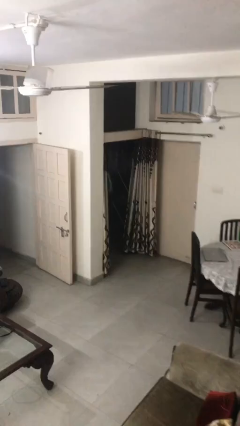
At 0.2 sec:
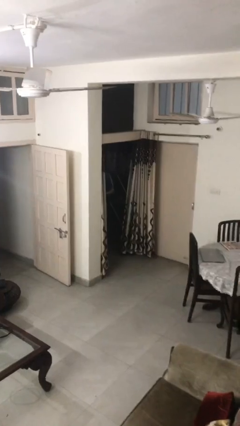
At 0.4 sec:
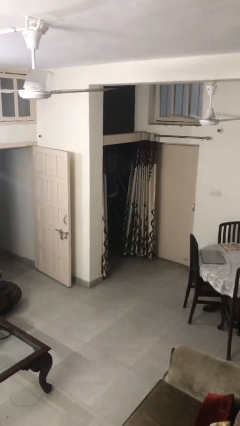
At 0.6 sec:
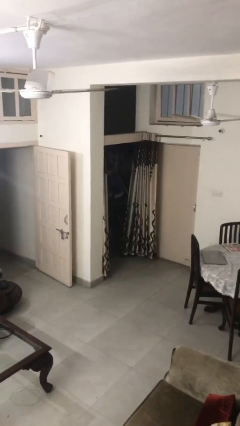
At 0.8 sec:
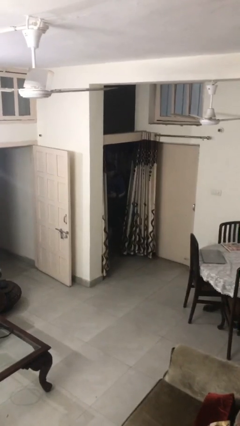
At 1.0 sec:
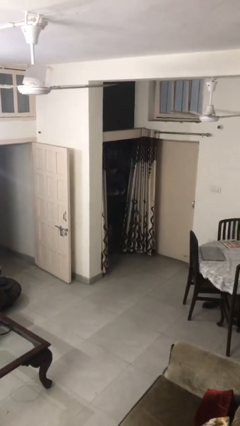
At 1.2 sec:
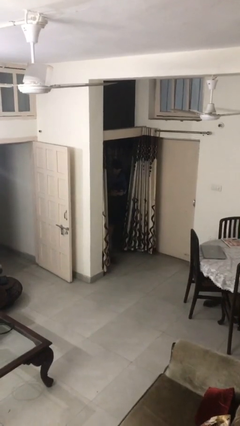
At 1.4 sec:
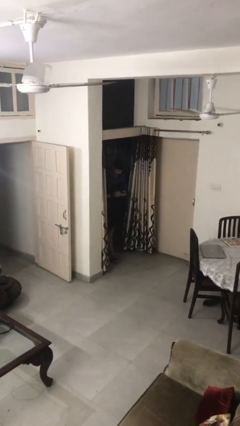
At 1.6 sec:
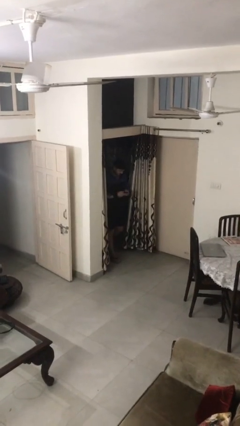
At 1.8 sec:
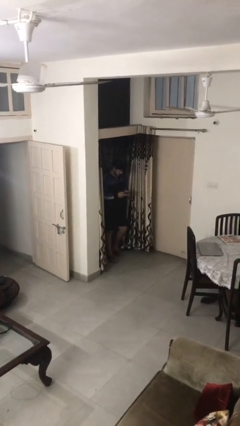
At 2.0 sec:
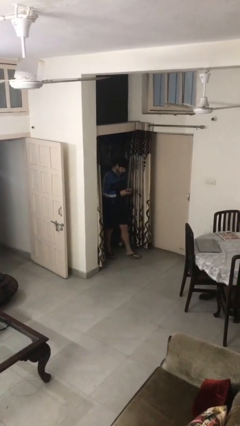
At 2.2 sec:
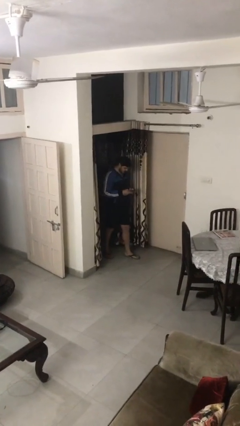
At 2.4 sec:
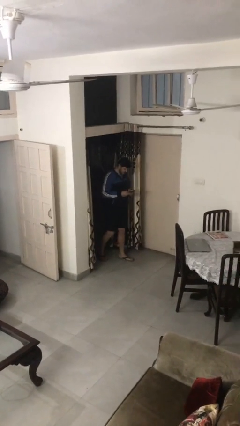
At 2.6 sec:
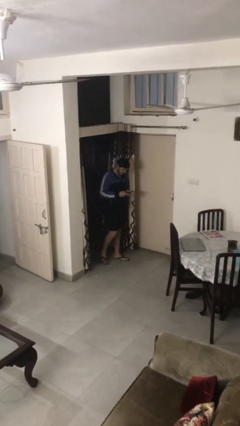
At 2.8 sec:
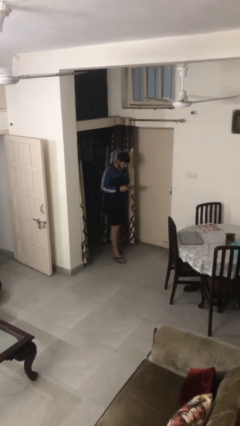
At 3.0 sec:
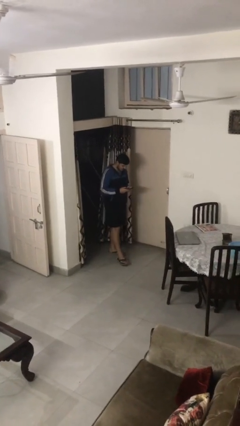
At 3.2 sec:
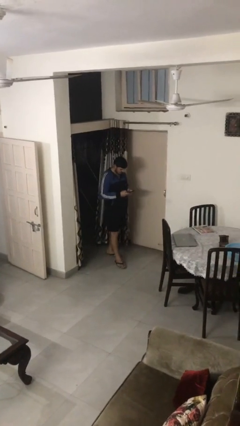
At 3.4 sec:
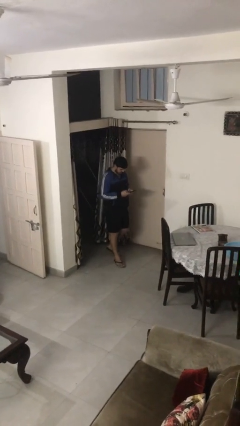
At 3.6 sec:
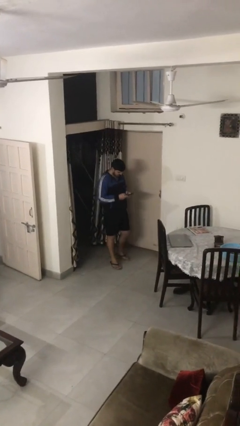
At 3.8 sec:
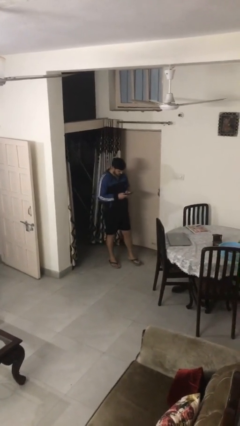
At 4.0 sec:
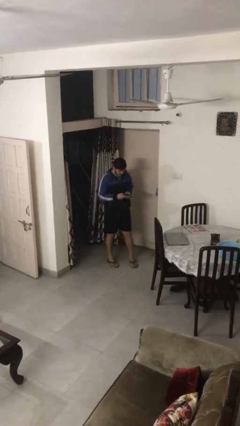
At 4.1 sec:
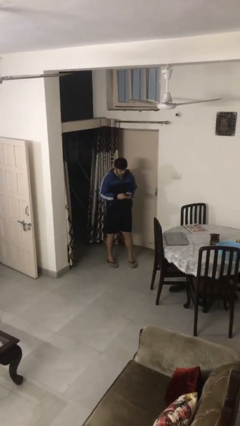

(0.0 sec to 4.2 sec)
person enters scene through structure

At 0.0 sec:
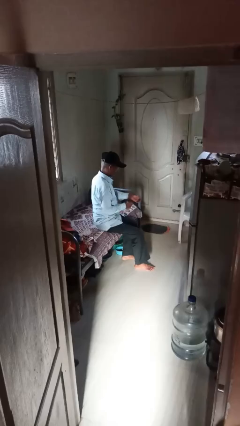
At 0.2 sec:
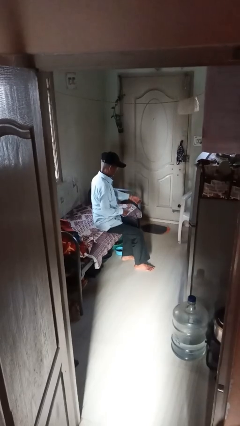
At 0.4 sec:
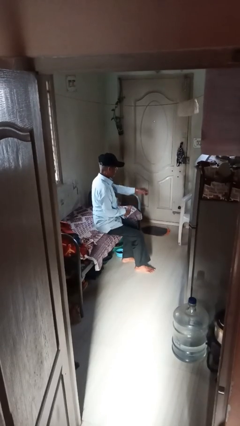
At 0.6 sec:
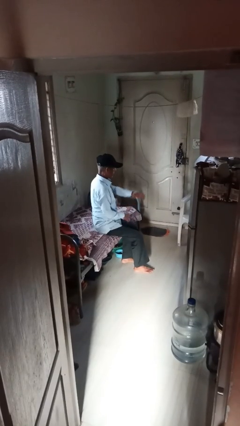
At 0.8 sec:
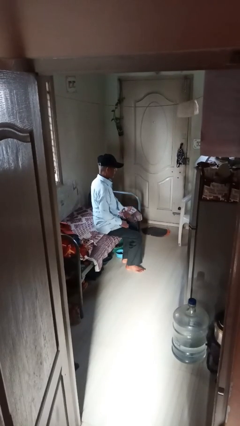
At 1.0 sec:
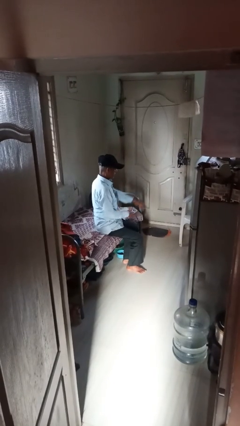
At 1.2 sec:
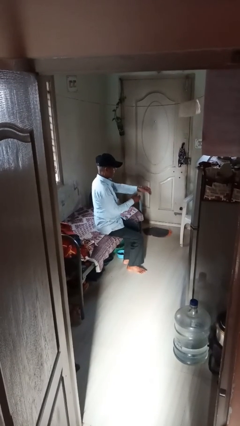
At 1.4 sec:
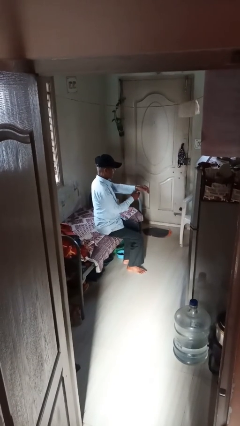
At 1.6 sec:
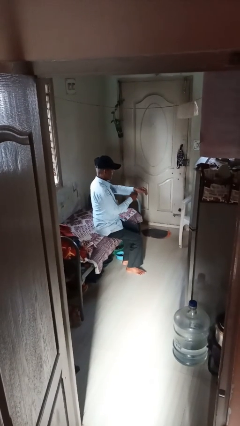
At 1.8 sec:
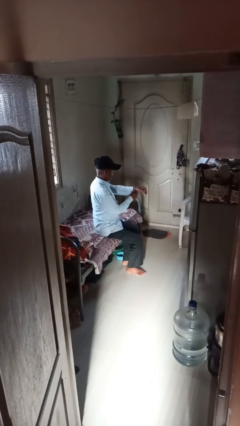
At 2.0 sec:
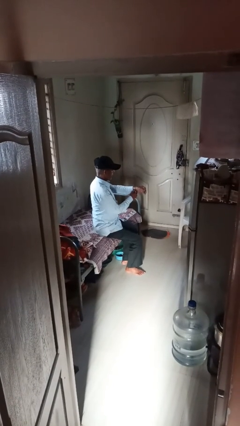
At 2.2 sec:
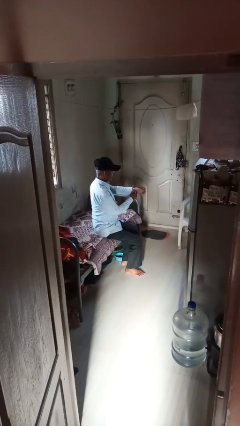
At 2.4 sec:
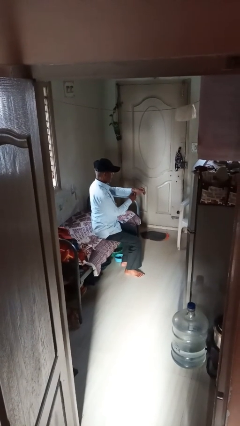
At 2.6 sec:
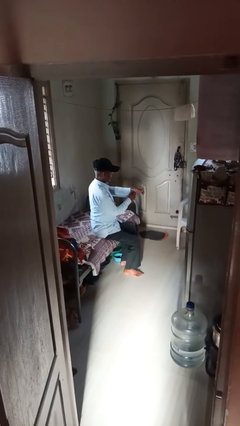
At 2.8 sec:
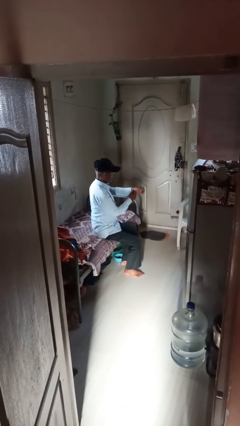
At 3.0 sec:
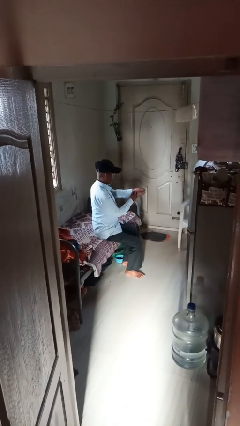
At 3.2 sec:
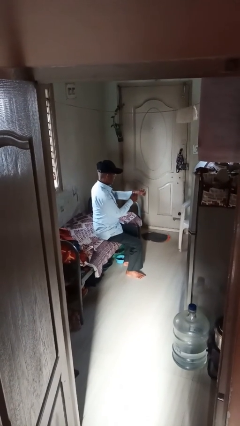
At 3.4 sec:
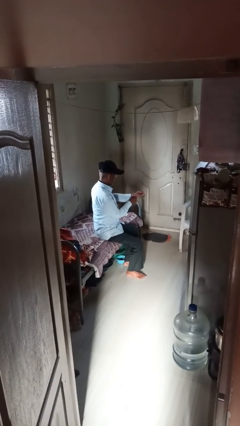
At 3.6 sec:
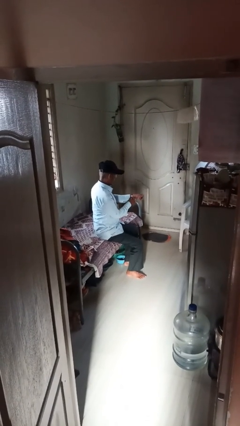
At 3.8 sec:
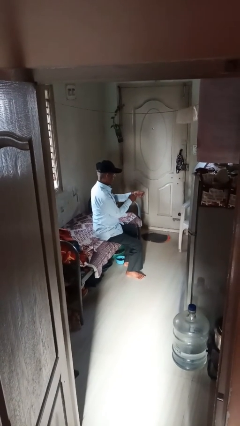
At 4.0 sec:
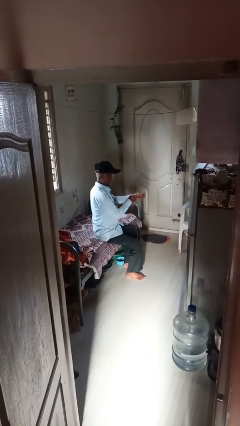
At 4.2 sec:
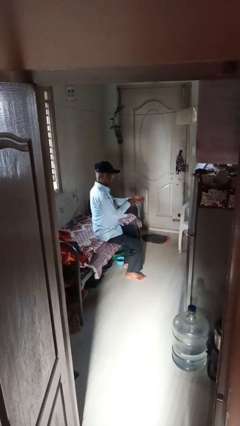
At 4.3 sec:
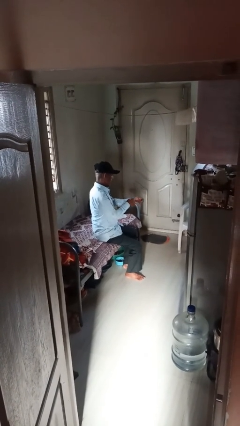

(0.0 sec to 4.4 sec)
person puts on wristwatch

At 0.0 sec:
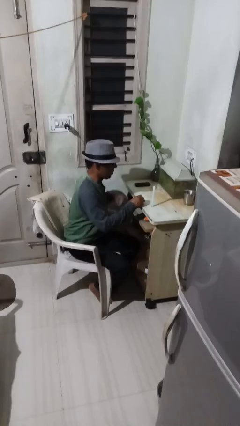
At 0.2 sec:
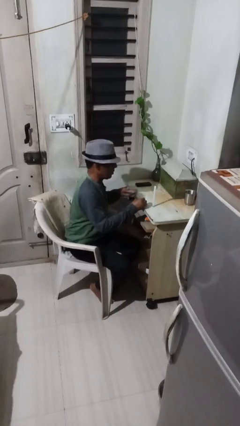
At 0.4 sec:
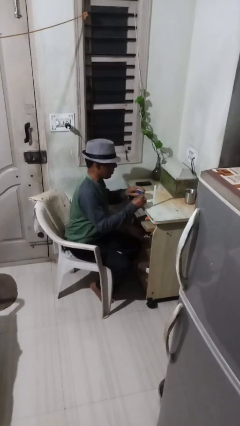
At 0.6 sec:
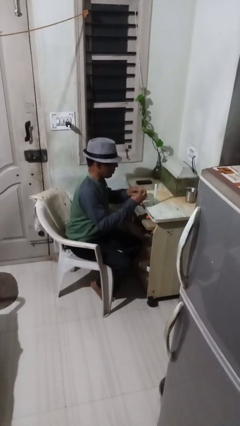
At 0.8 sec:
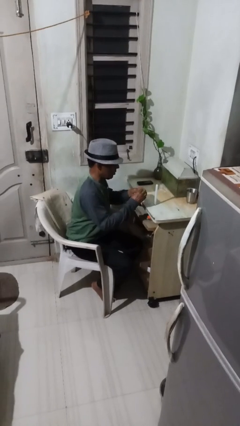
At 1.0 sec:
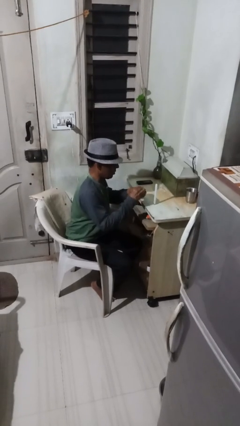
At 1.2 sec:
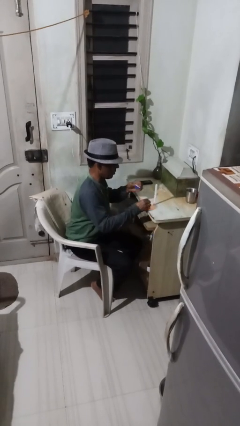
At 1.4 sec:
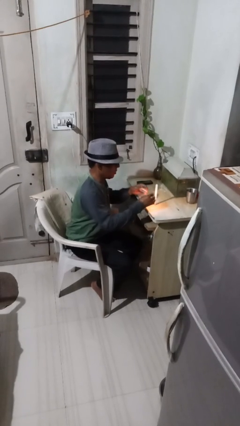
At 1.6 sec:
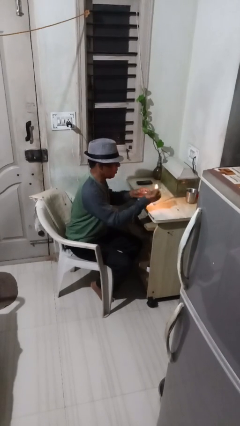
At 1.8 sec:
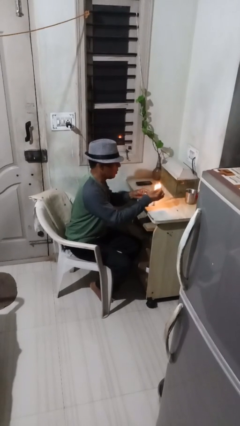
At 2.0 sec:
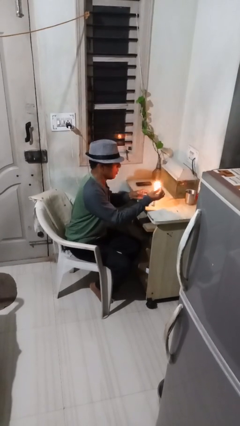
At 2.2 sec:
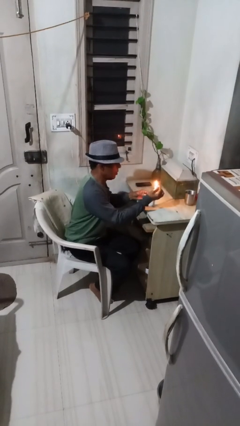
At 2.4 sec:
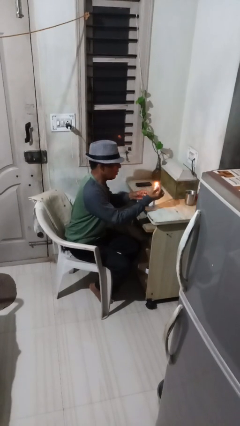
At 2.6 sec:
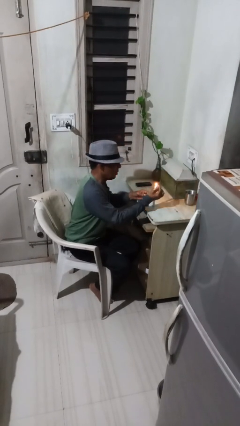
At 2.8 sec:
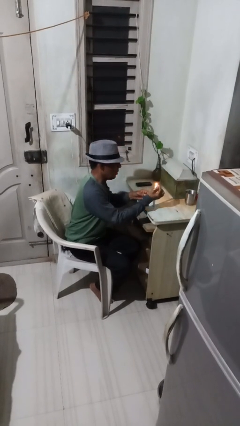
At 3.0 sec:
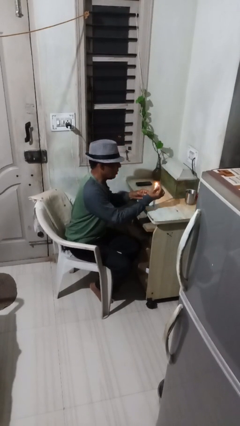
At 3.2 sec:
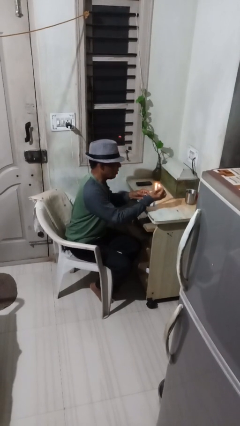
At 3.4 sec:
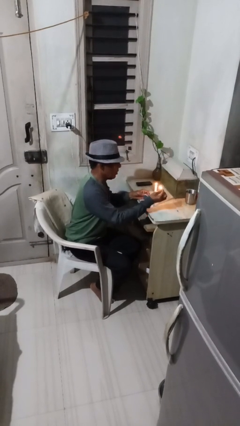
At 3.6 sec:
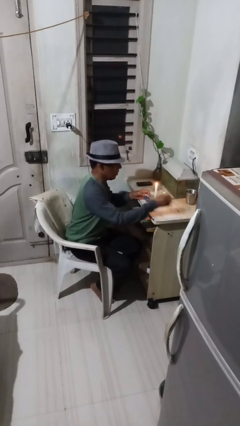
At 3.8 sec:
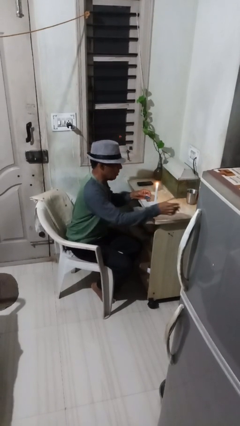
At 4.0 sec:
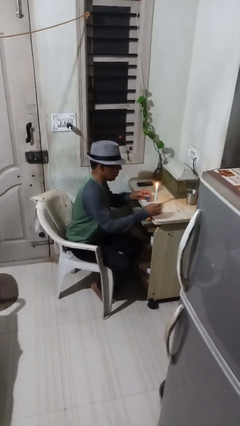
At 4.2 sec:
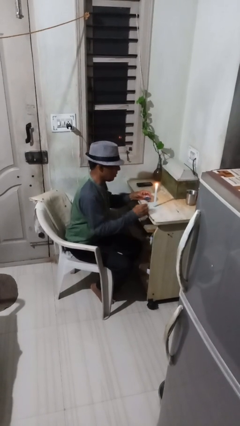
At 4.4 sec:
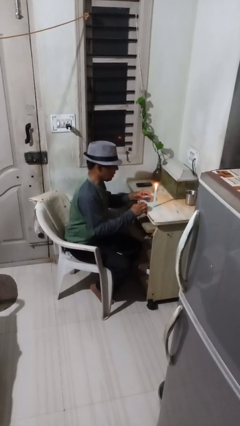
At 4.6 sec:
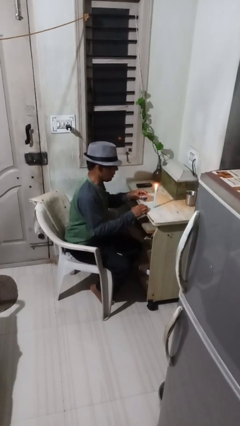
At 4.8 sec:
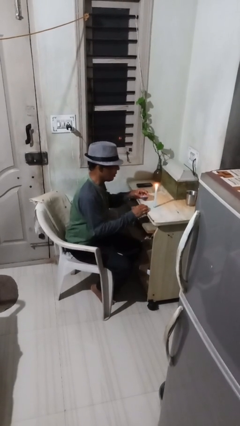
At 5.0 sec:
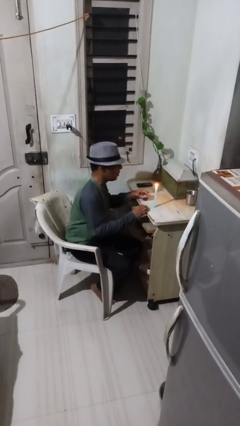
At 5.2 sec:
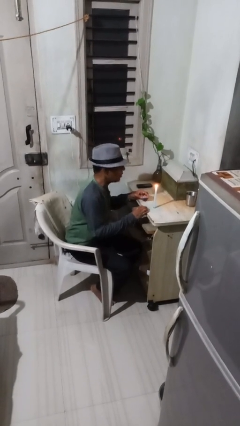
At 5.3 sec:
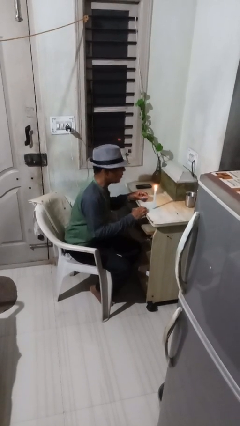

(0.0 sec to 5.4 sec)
person lights candle

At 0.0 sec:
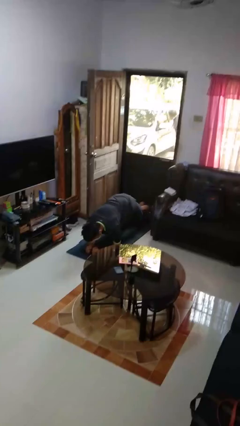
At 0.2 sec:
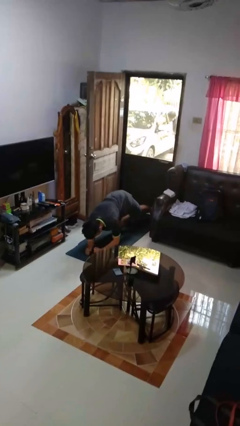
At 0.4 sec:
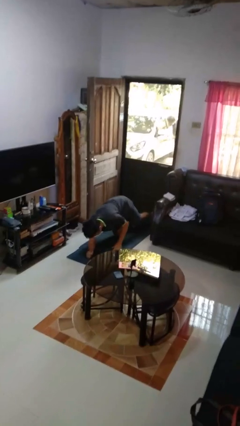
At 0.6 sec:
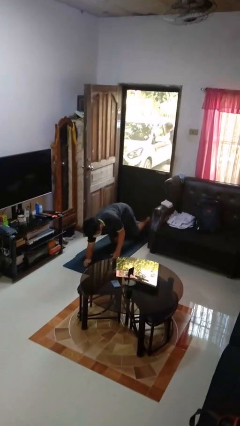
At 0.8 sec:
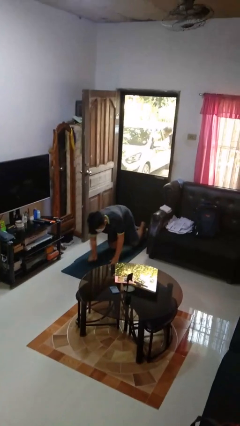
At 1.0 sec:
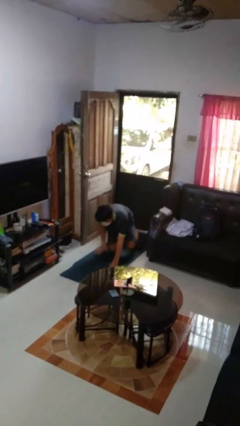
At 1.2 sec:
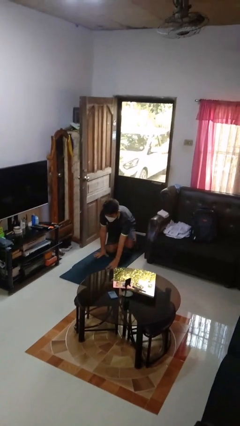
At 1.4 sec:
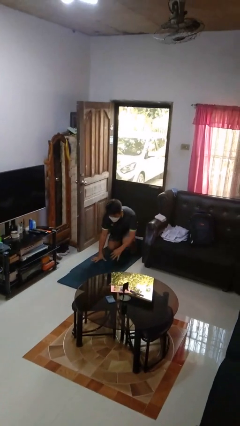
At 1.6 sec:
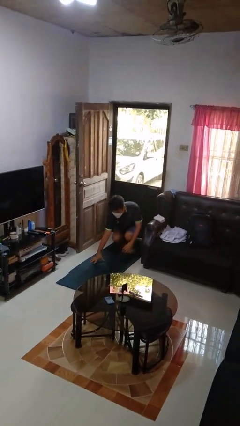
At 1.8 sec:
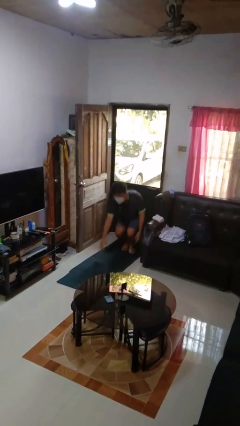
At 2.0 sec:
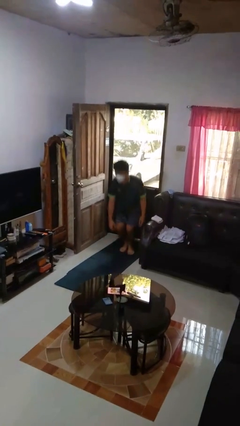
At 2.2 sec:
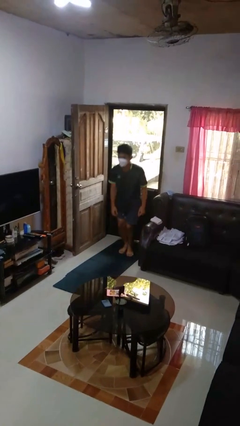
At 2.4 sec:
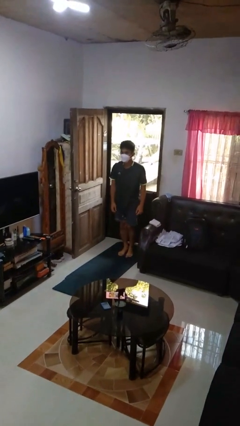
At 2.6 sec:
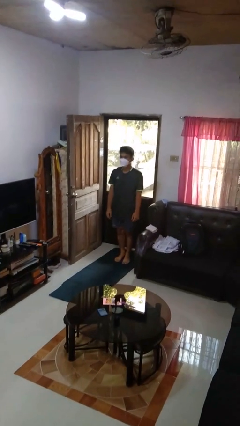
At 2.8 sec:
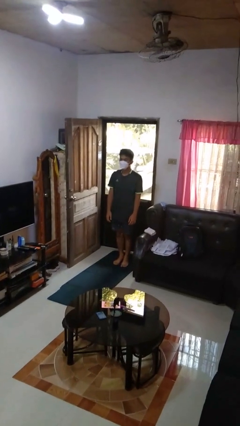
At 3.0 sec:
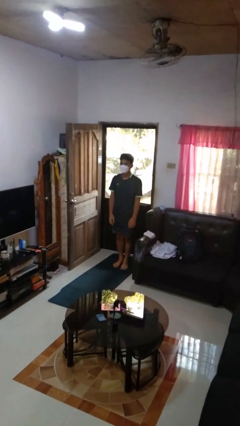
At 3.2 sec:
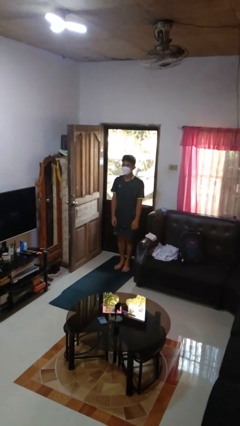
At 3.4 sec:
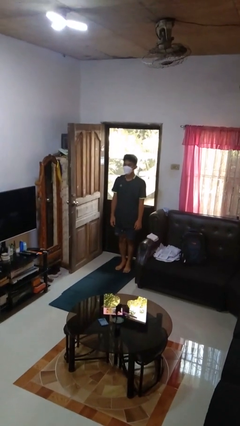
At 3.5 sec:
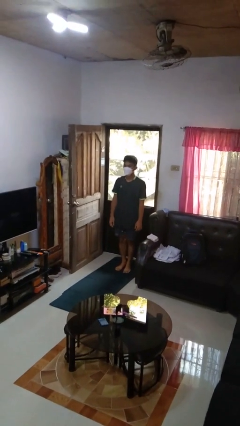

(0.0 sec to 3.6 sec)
person stands up from floor
